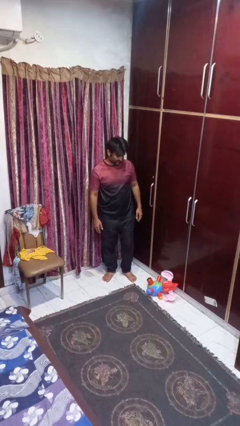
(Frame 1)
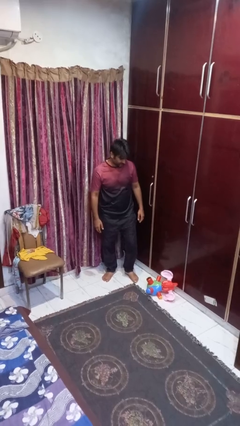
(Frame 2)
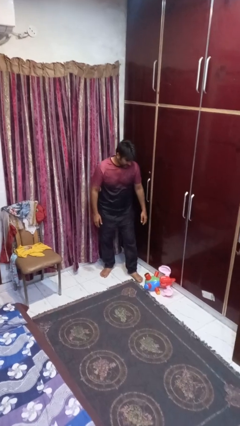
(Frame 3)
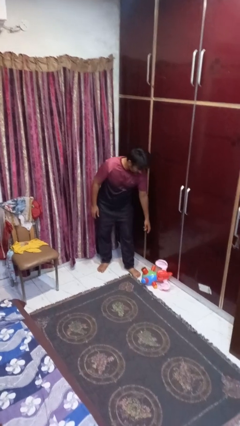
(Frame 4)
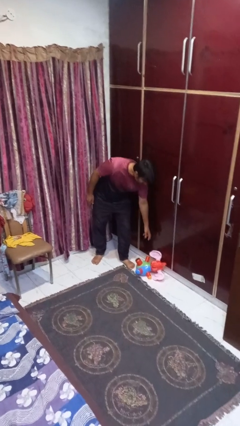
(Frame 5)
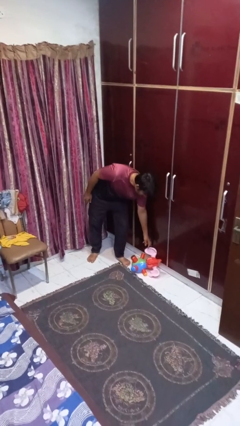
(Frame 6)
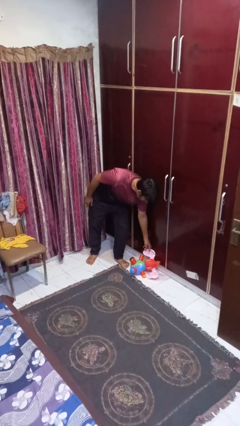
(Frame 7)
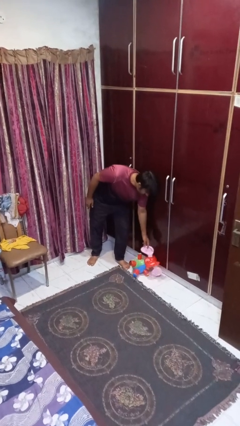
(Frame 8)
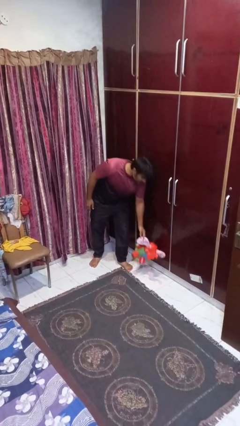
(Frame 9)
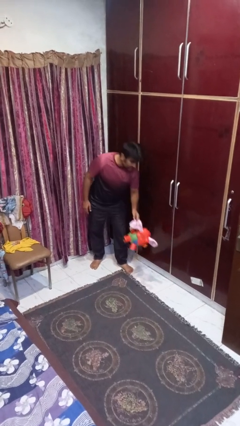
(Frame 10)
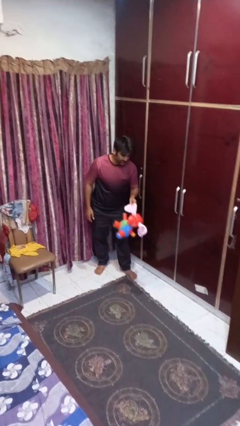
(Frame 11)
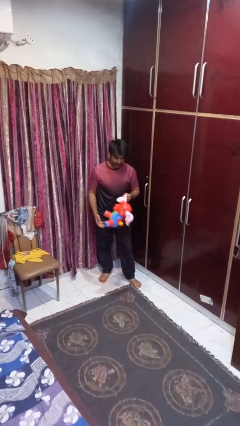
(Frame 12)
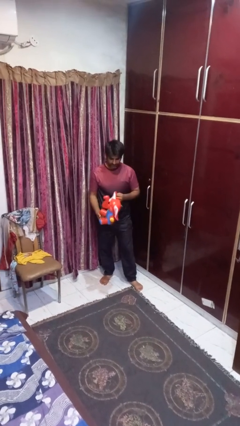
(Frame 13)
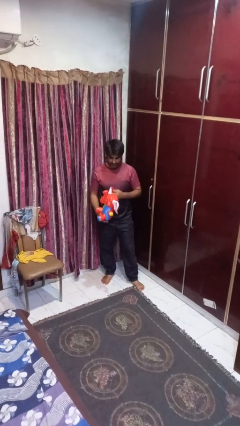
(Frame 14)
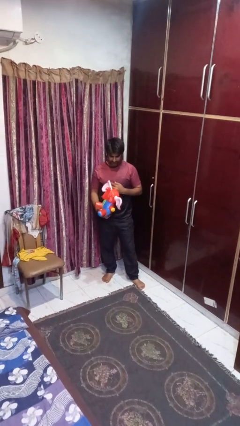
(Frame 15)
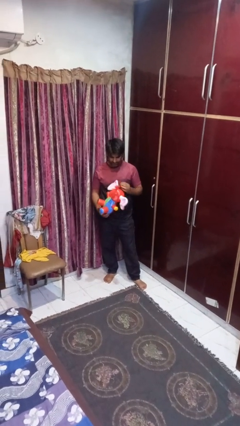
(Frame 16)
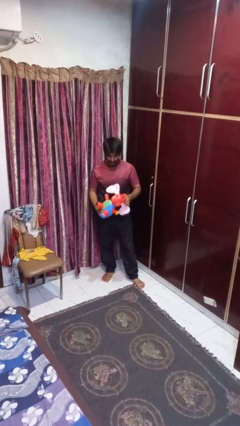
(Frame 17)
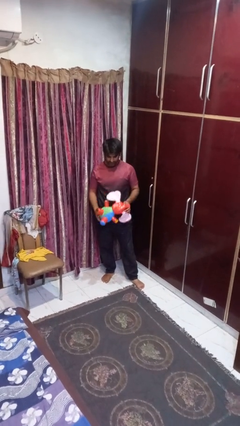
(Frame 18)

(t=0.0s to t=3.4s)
person picks up object from floor

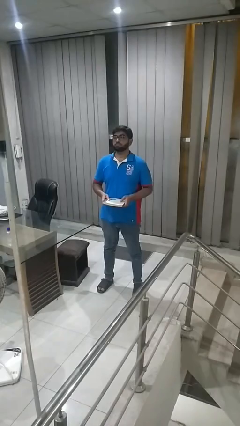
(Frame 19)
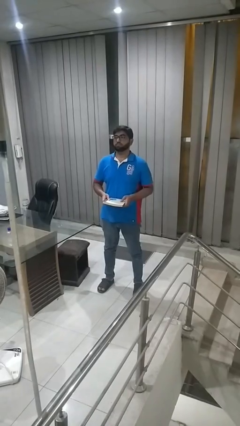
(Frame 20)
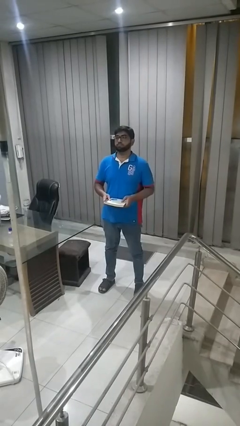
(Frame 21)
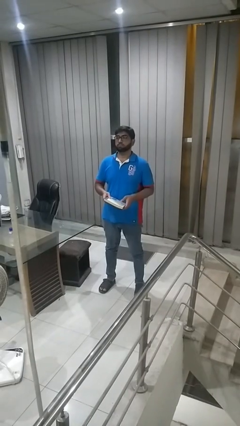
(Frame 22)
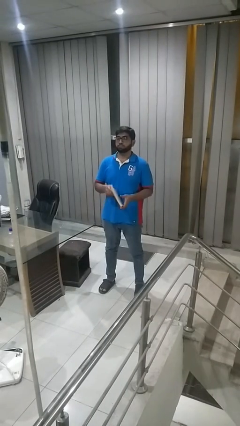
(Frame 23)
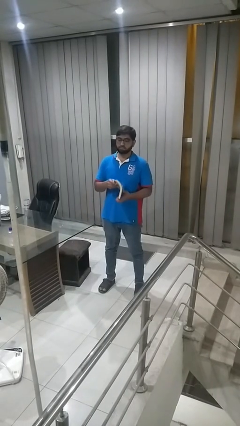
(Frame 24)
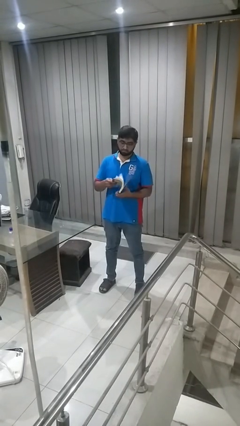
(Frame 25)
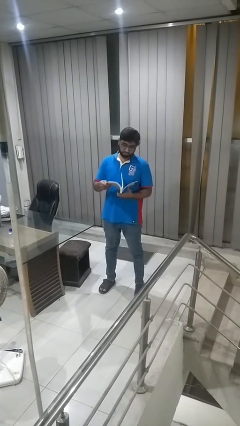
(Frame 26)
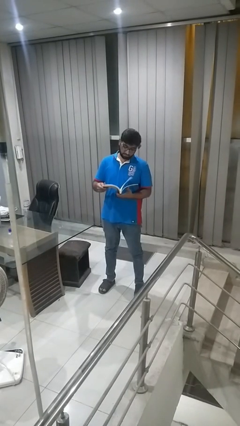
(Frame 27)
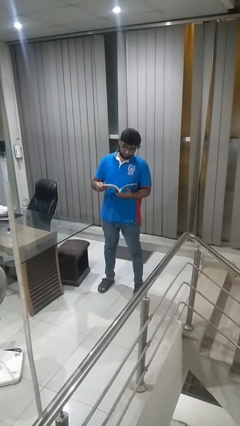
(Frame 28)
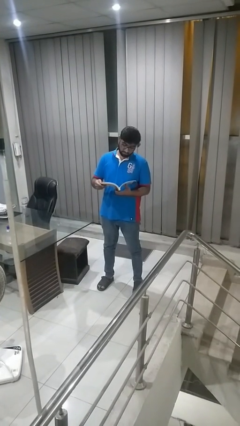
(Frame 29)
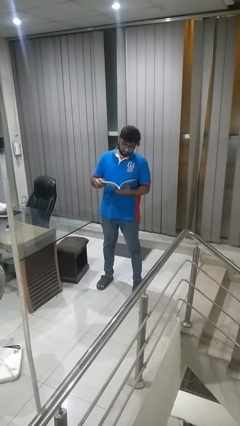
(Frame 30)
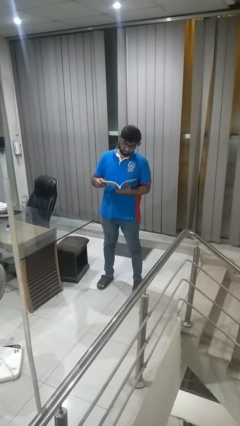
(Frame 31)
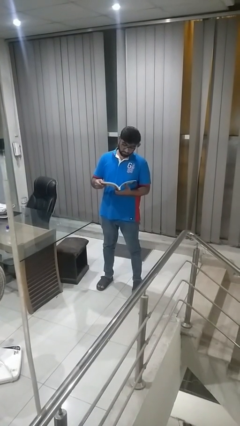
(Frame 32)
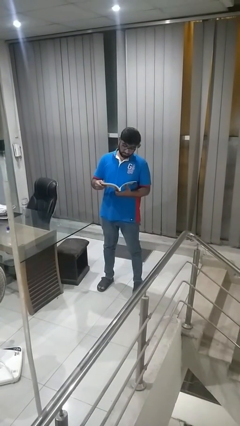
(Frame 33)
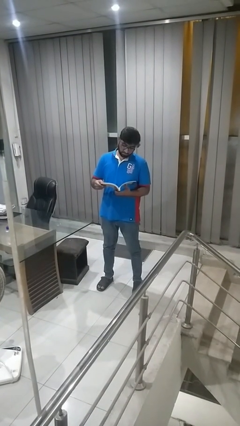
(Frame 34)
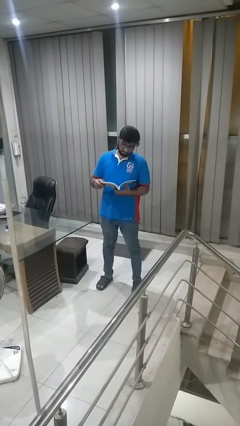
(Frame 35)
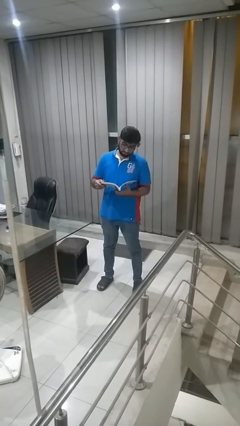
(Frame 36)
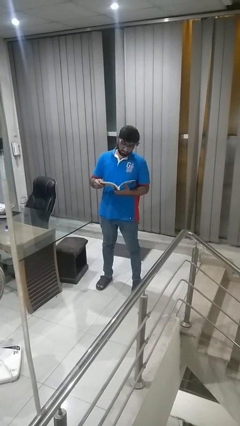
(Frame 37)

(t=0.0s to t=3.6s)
person reads book

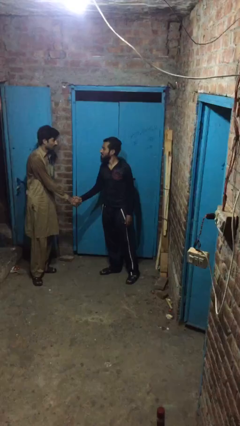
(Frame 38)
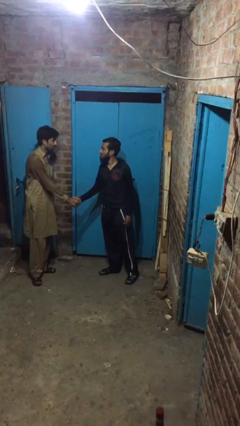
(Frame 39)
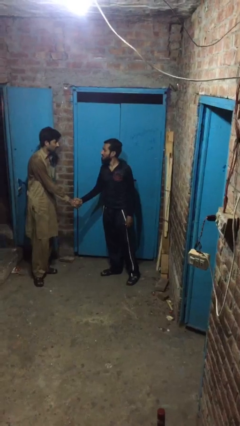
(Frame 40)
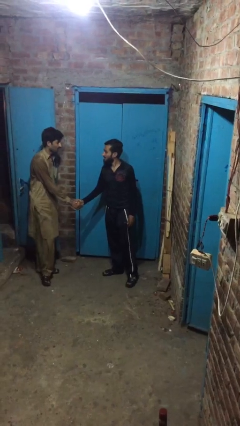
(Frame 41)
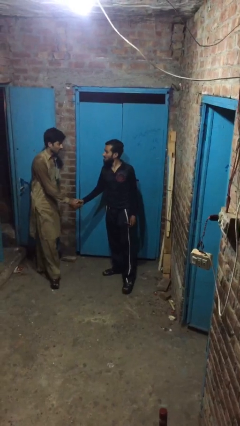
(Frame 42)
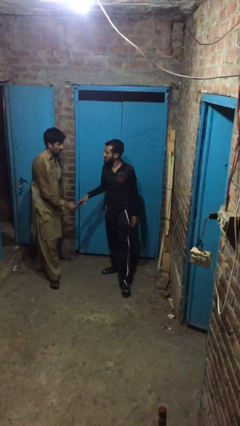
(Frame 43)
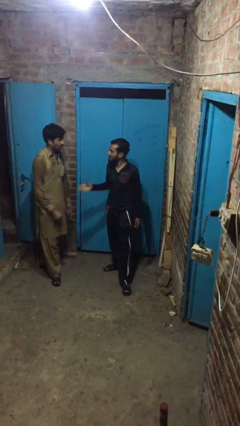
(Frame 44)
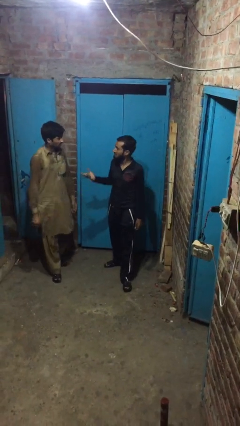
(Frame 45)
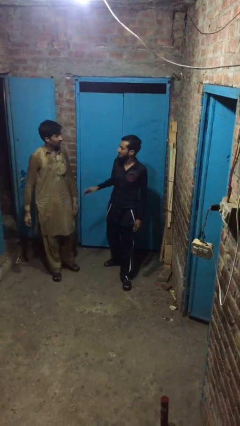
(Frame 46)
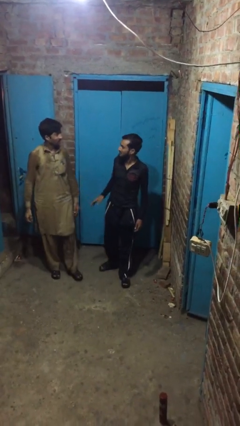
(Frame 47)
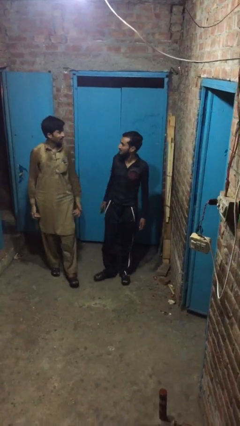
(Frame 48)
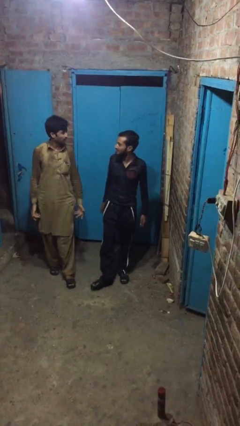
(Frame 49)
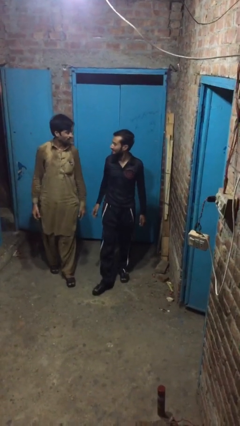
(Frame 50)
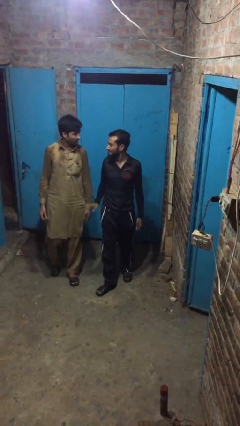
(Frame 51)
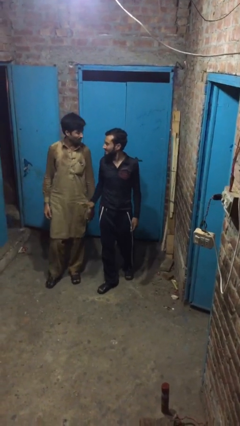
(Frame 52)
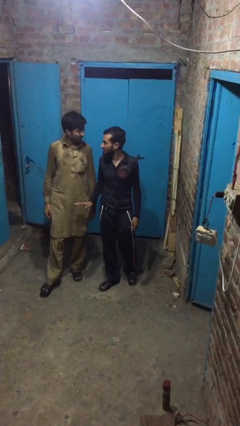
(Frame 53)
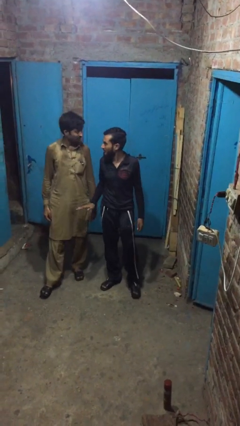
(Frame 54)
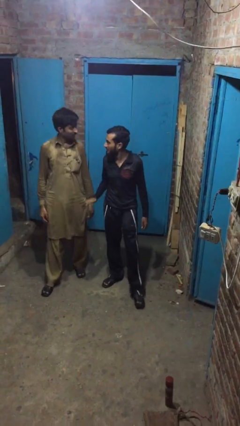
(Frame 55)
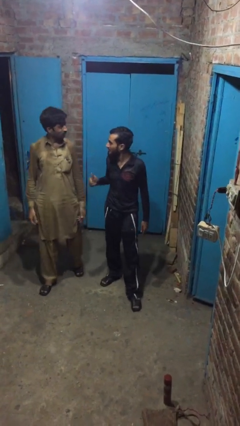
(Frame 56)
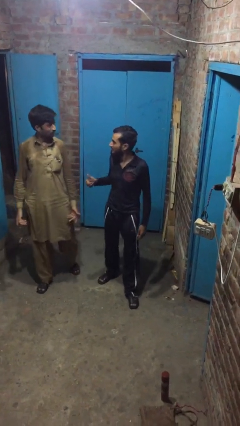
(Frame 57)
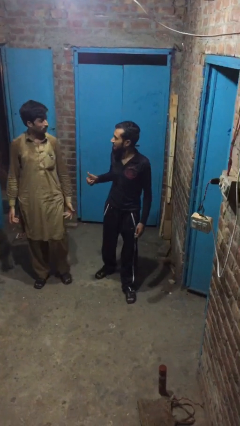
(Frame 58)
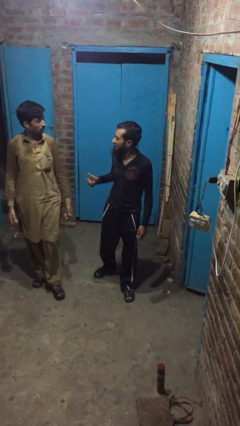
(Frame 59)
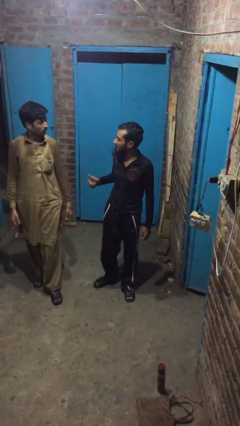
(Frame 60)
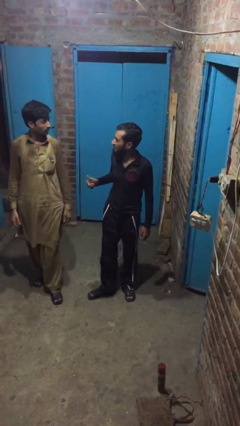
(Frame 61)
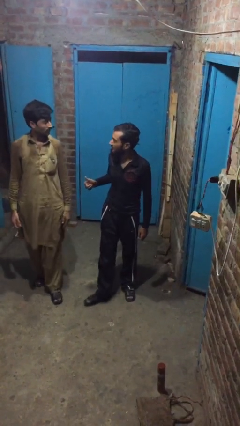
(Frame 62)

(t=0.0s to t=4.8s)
person talks to person

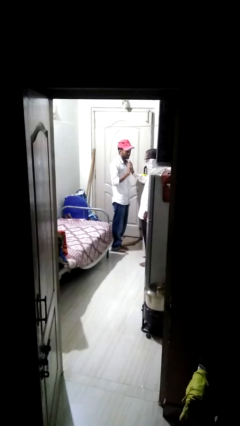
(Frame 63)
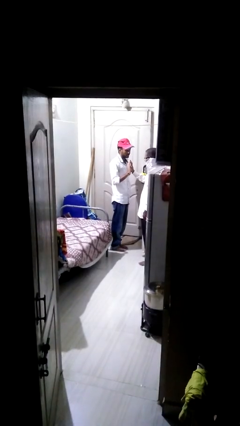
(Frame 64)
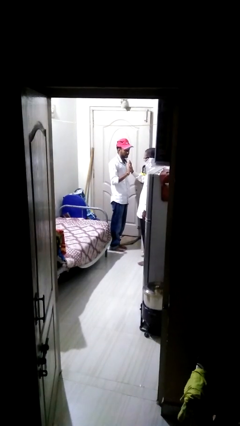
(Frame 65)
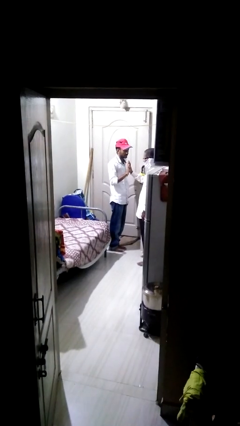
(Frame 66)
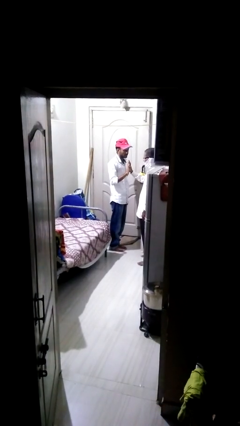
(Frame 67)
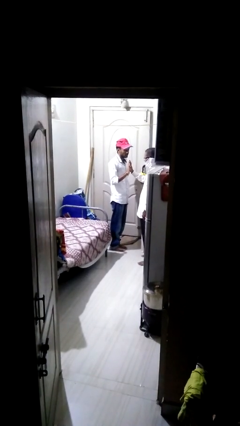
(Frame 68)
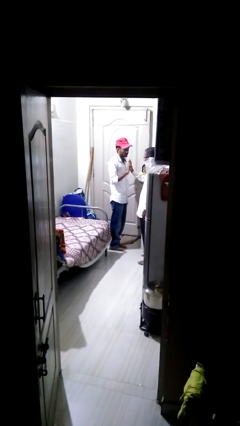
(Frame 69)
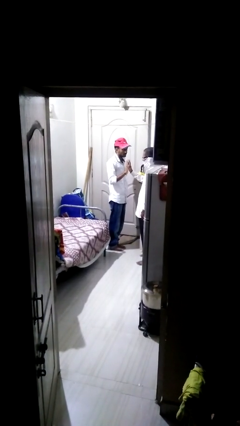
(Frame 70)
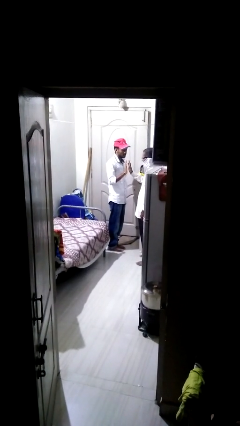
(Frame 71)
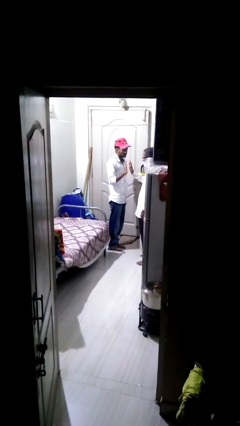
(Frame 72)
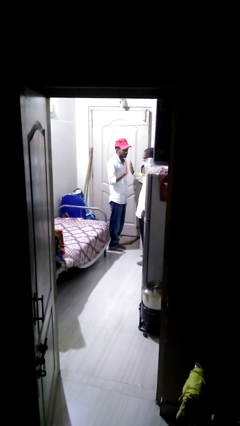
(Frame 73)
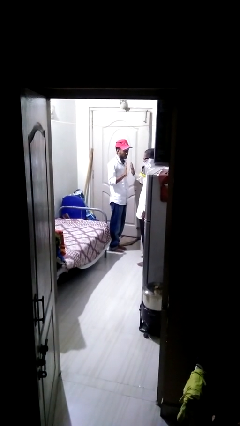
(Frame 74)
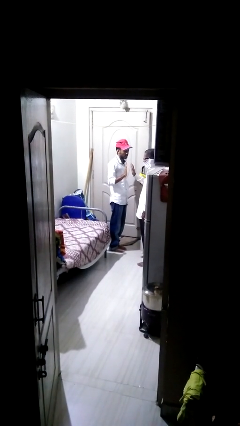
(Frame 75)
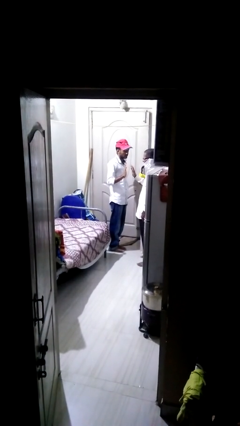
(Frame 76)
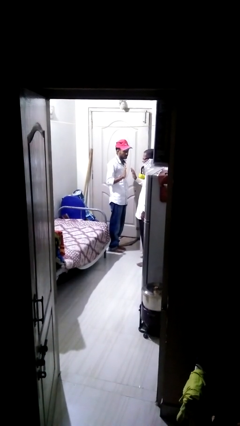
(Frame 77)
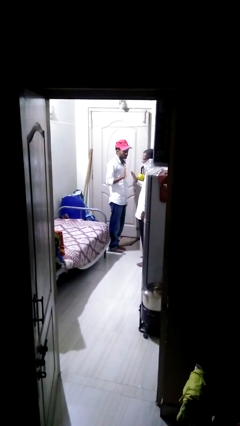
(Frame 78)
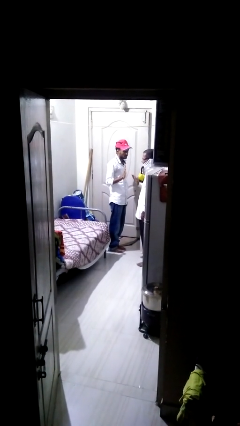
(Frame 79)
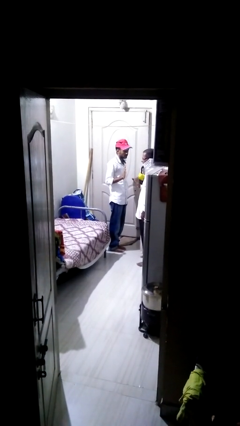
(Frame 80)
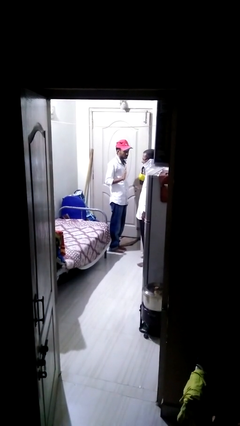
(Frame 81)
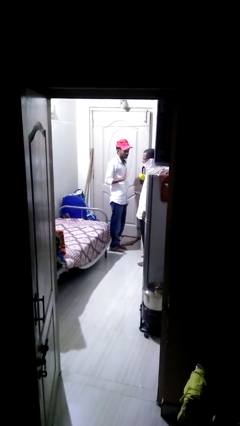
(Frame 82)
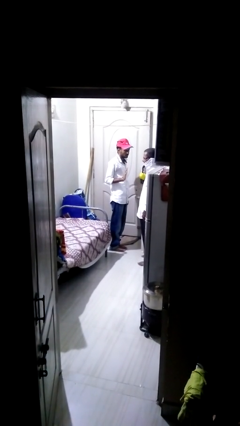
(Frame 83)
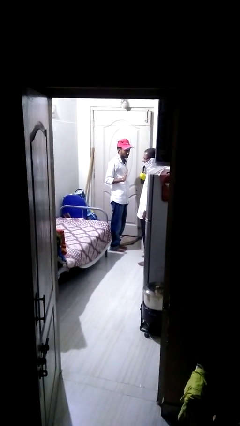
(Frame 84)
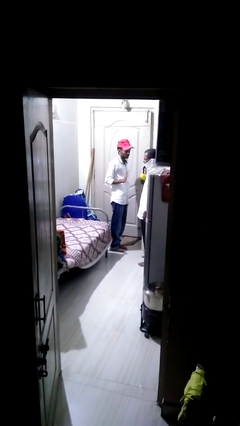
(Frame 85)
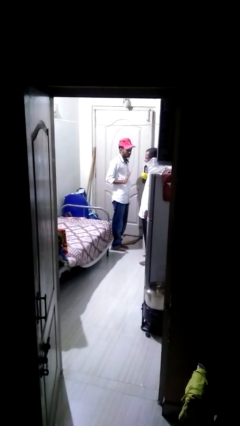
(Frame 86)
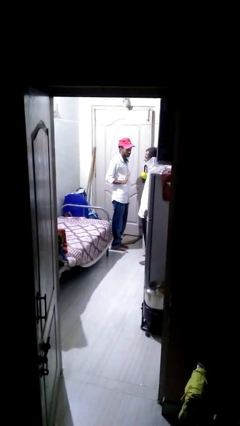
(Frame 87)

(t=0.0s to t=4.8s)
person highfives hand

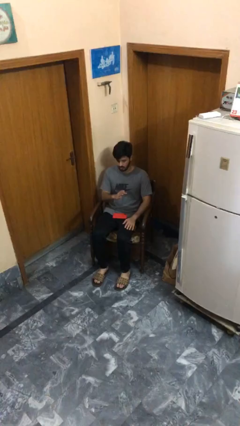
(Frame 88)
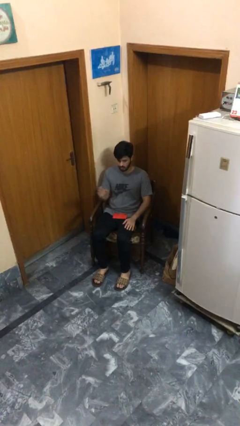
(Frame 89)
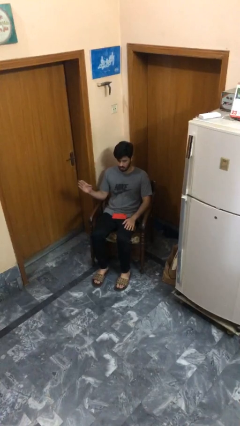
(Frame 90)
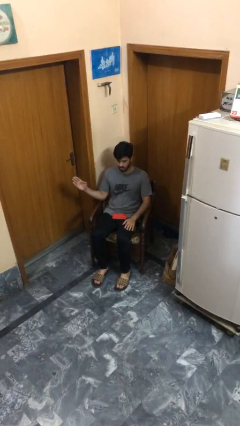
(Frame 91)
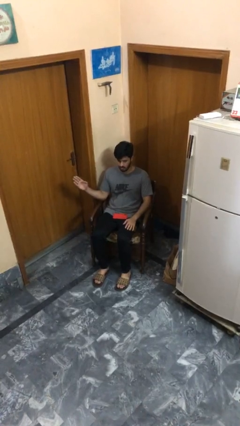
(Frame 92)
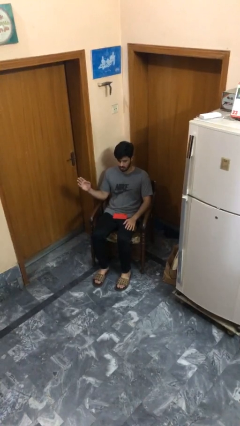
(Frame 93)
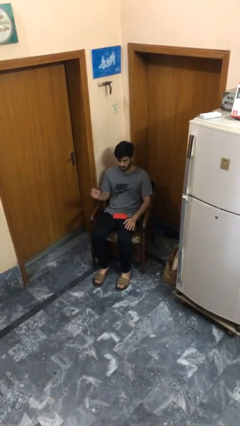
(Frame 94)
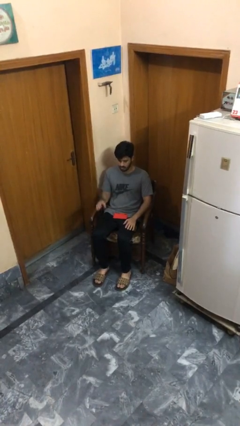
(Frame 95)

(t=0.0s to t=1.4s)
person gestures swipe right
